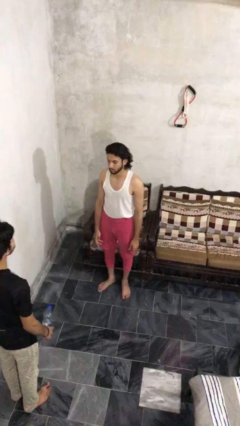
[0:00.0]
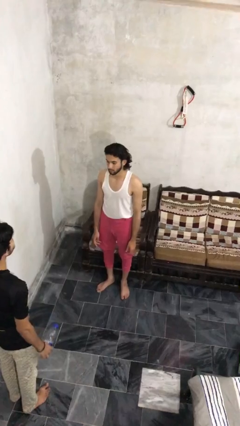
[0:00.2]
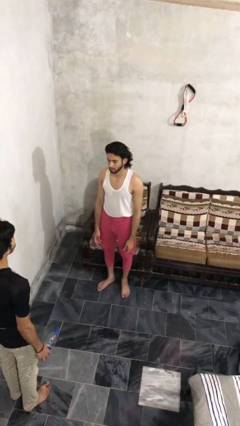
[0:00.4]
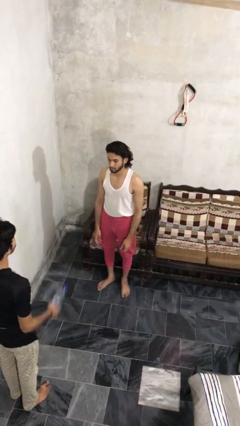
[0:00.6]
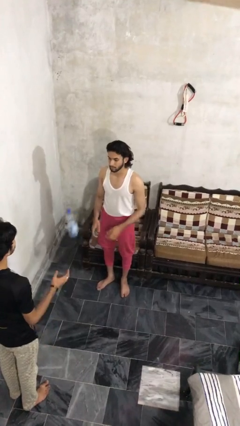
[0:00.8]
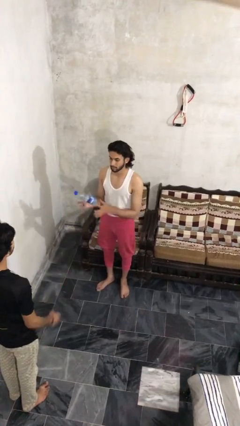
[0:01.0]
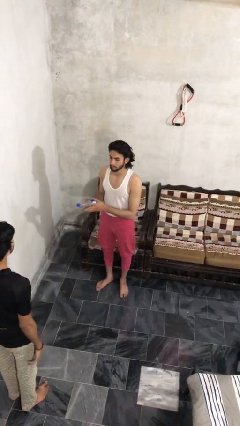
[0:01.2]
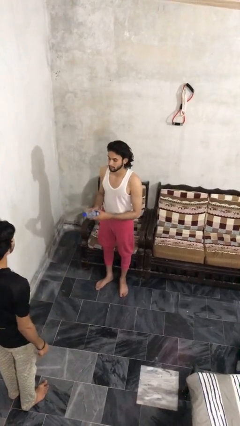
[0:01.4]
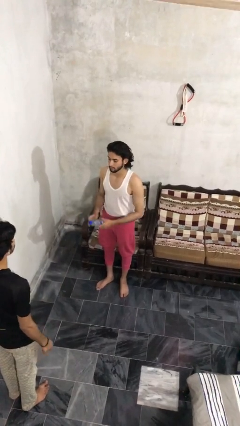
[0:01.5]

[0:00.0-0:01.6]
person catches object from person

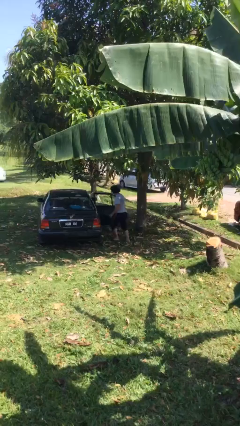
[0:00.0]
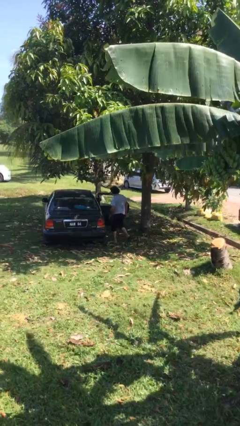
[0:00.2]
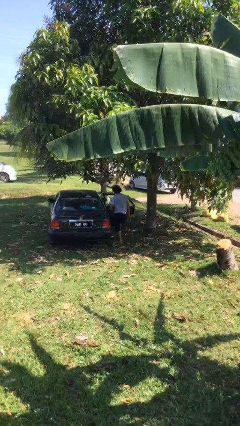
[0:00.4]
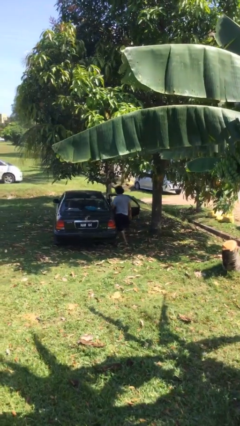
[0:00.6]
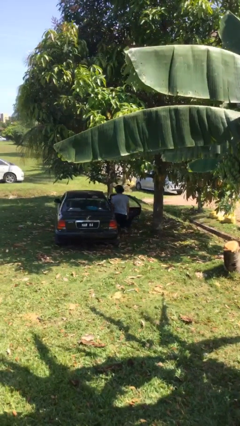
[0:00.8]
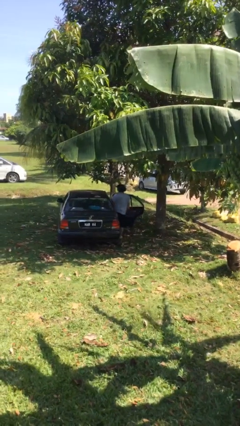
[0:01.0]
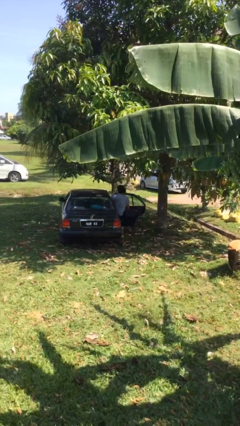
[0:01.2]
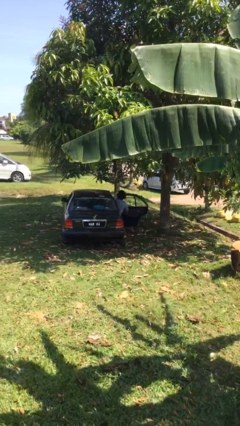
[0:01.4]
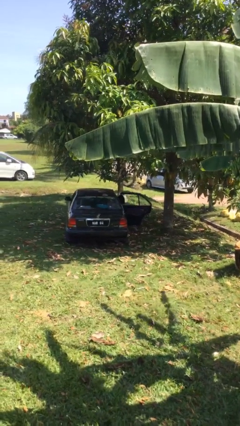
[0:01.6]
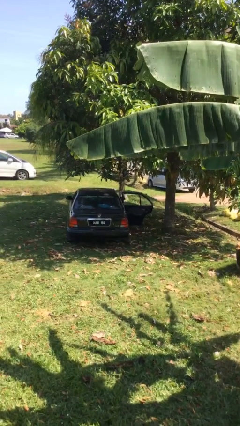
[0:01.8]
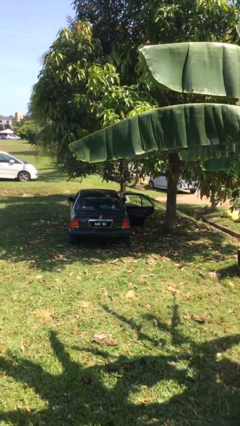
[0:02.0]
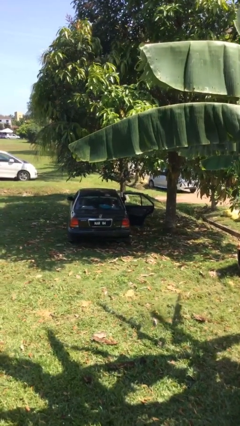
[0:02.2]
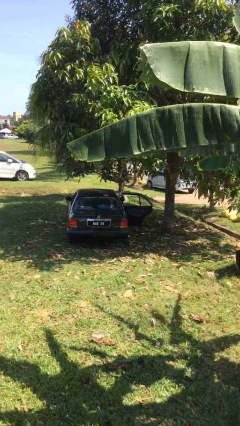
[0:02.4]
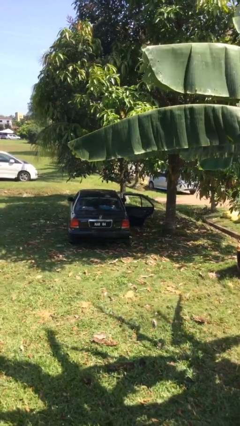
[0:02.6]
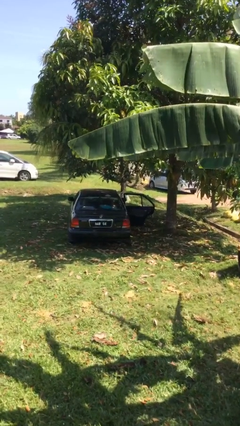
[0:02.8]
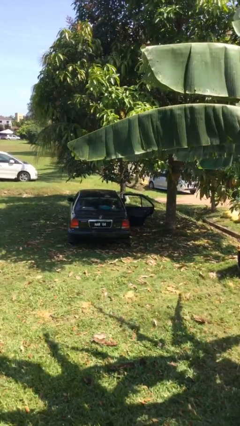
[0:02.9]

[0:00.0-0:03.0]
person enters car

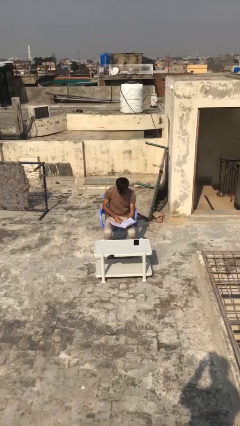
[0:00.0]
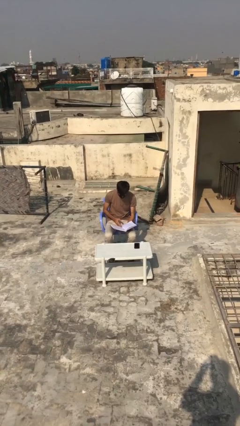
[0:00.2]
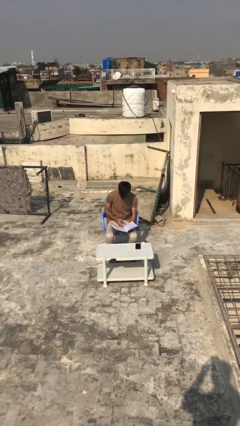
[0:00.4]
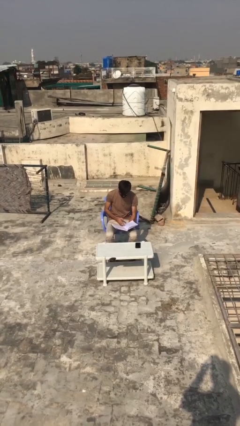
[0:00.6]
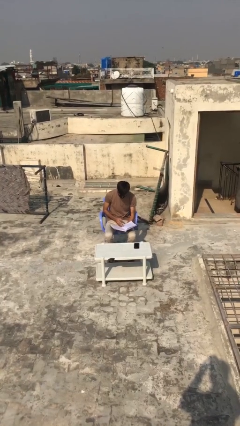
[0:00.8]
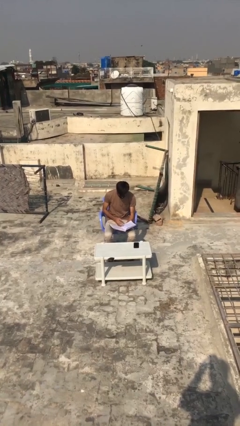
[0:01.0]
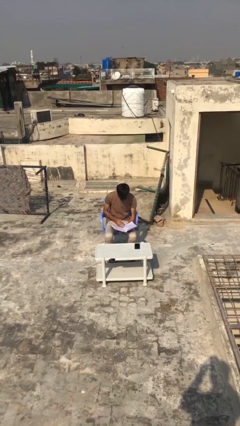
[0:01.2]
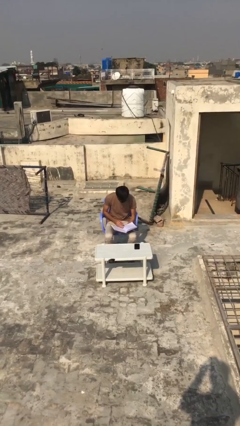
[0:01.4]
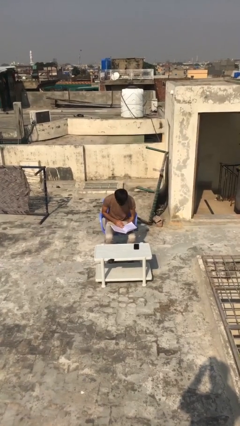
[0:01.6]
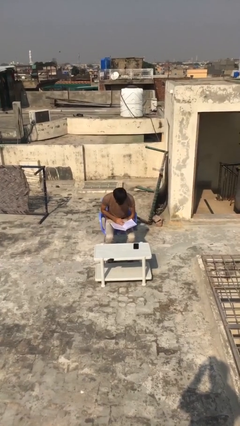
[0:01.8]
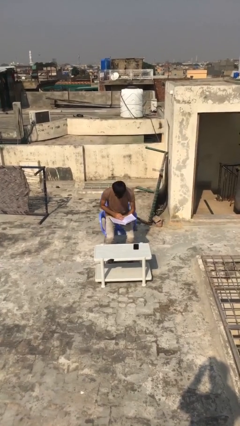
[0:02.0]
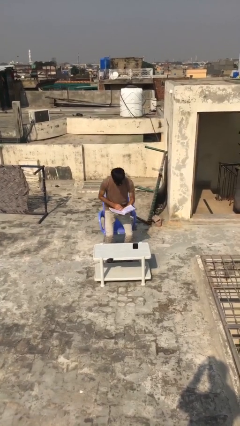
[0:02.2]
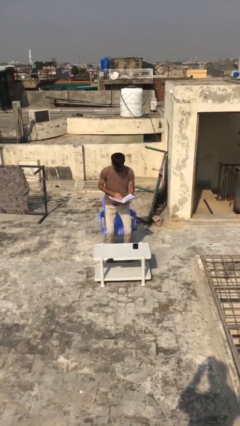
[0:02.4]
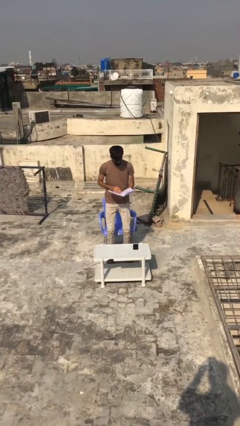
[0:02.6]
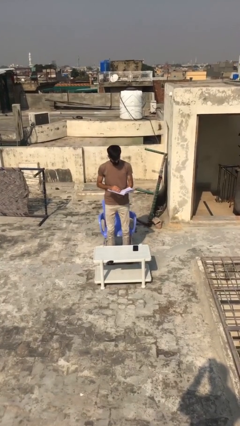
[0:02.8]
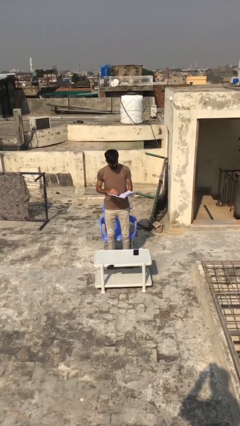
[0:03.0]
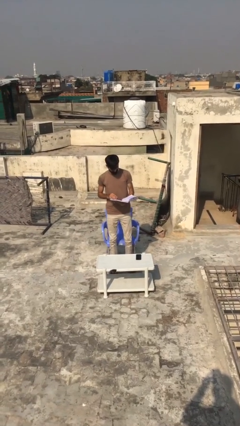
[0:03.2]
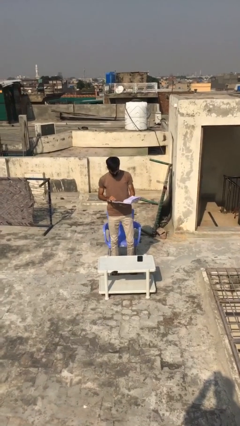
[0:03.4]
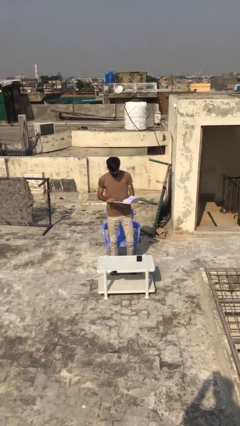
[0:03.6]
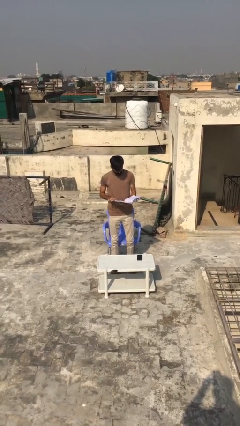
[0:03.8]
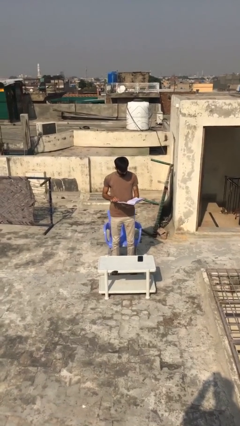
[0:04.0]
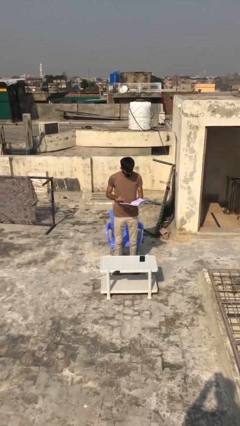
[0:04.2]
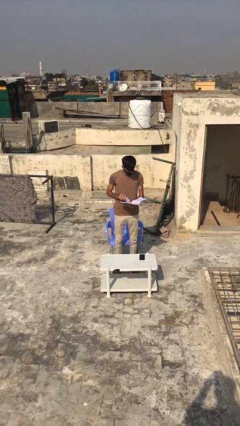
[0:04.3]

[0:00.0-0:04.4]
person stands up

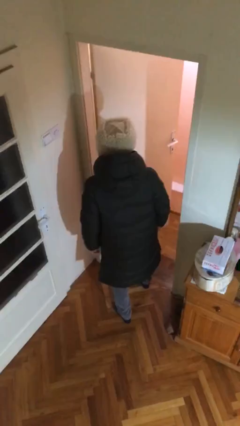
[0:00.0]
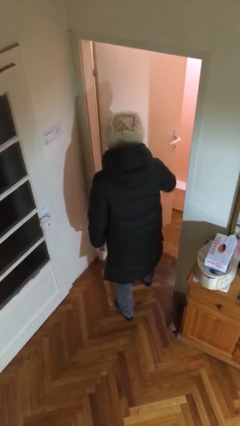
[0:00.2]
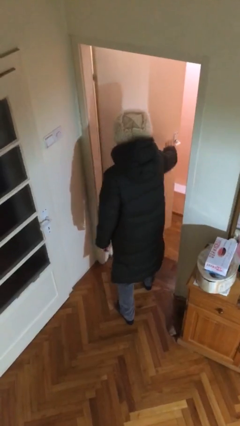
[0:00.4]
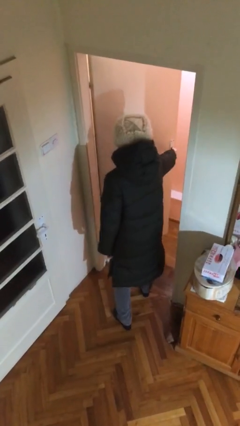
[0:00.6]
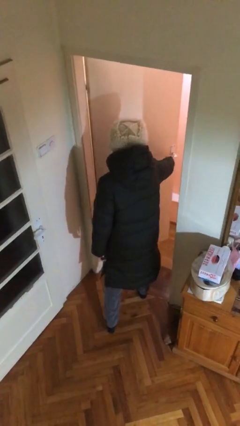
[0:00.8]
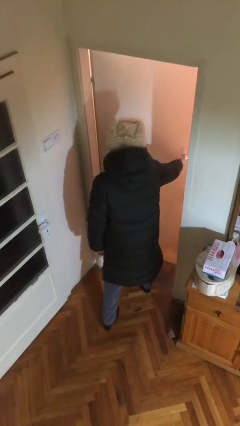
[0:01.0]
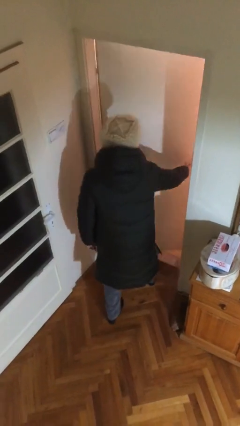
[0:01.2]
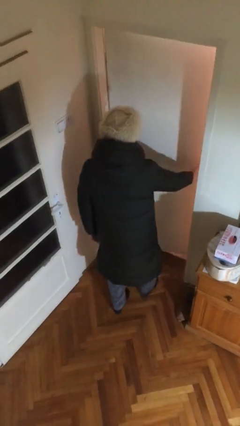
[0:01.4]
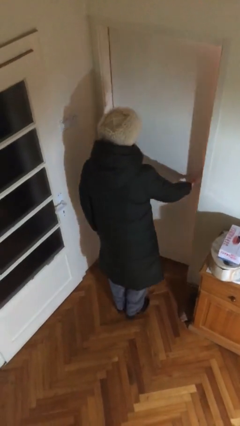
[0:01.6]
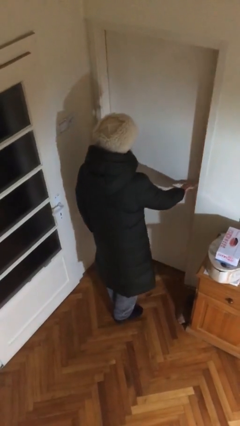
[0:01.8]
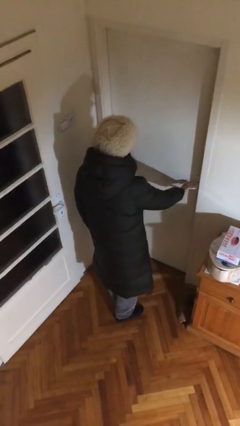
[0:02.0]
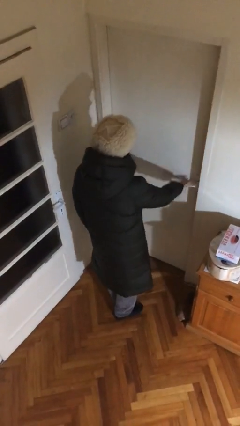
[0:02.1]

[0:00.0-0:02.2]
person closes facility door

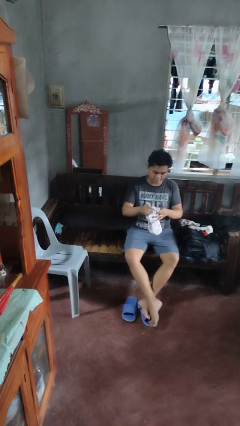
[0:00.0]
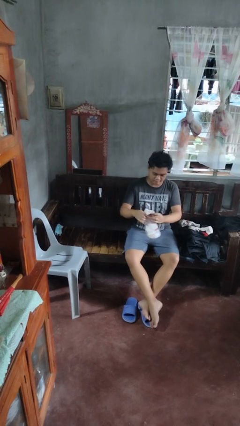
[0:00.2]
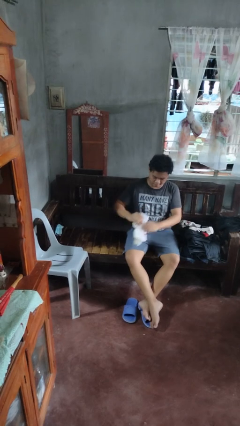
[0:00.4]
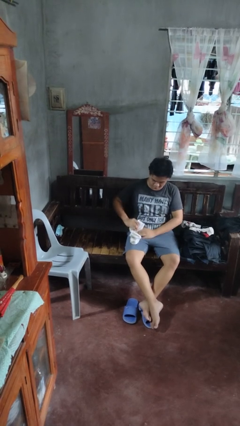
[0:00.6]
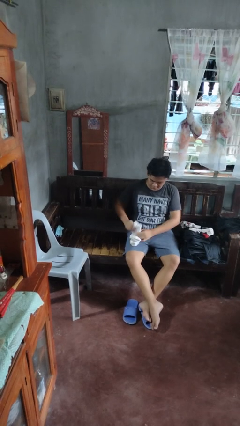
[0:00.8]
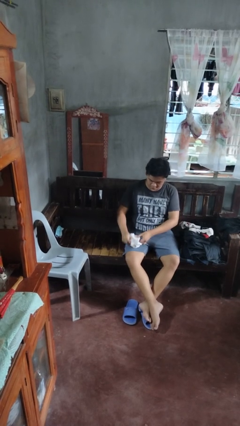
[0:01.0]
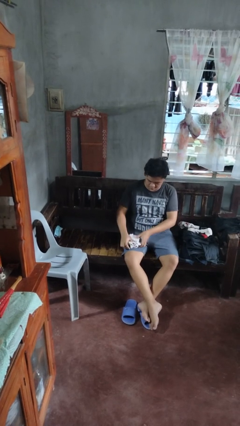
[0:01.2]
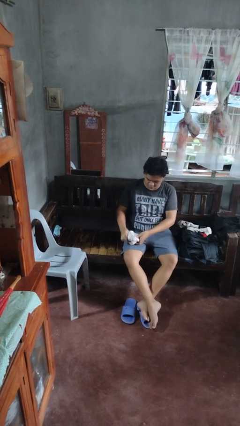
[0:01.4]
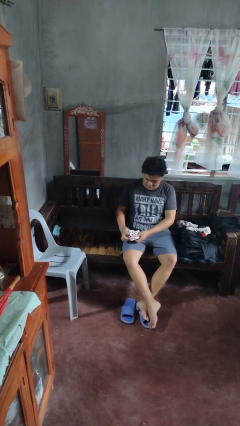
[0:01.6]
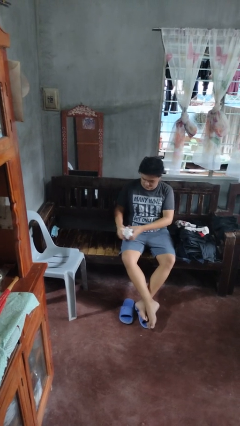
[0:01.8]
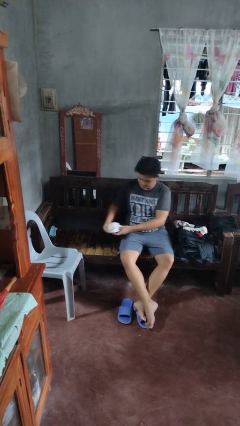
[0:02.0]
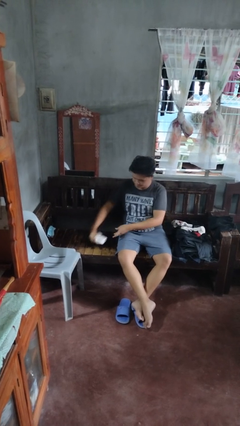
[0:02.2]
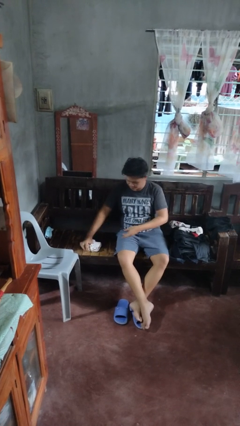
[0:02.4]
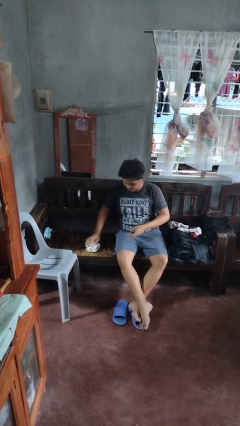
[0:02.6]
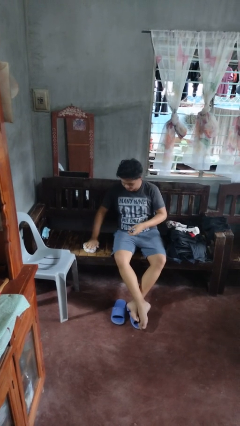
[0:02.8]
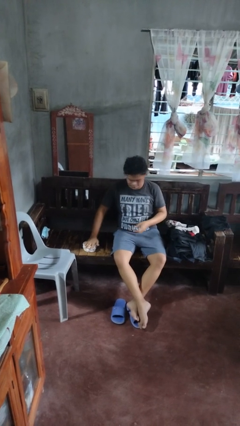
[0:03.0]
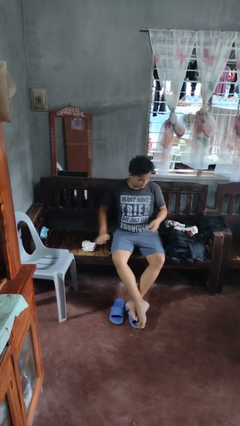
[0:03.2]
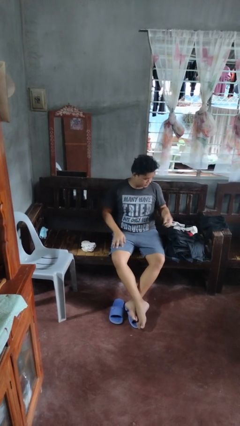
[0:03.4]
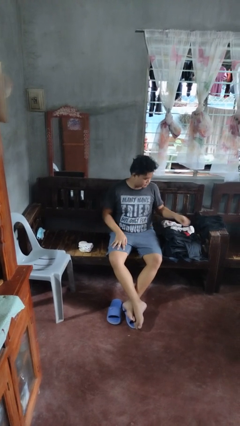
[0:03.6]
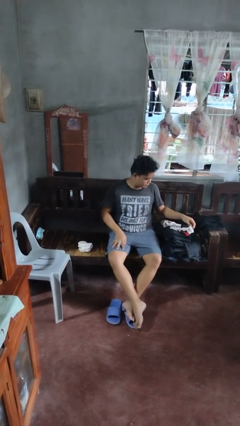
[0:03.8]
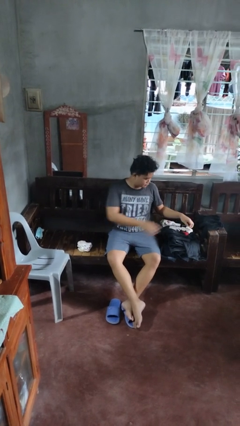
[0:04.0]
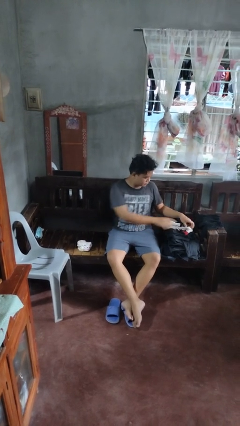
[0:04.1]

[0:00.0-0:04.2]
person folds socks

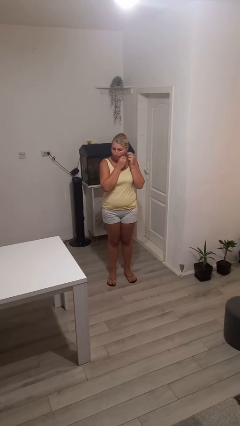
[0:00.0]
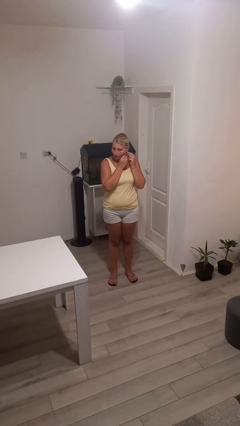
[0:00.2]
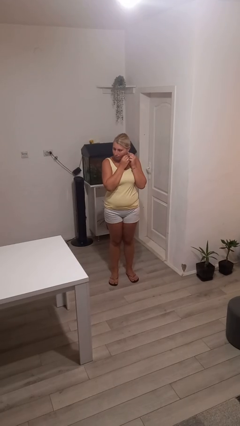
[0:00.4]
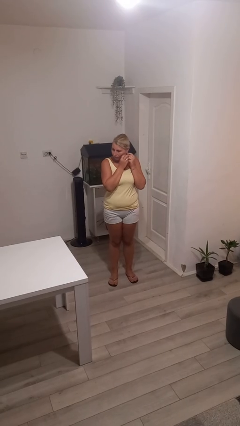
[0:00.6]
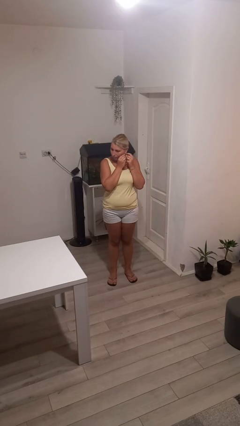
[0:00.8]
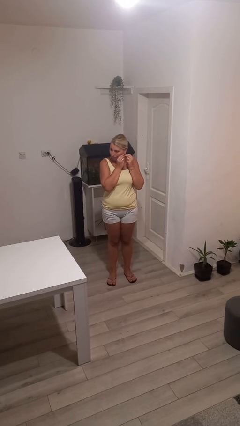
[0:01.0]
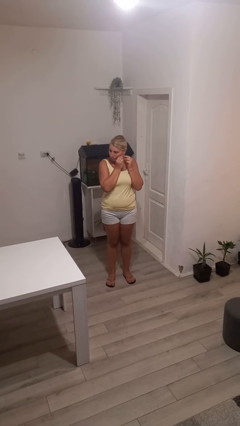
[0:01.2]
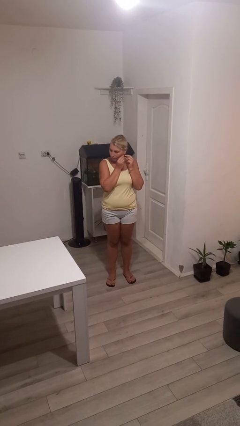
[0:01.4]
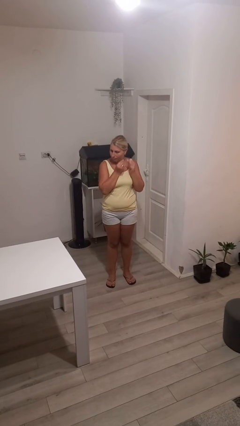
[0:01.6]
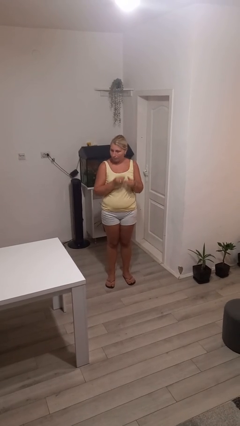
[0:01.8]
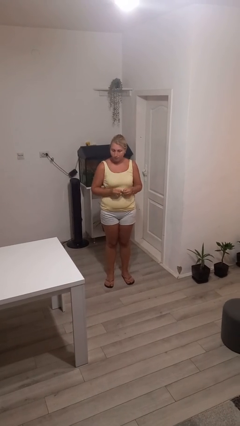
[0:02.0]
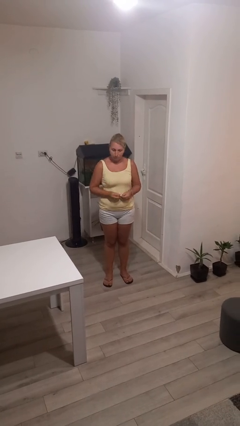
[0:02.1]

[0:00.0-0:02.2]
person takes off earrings
